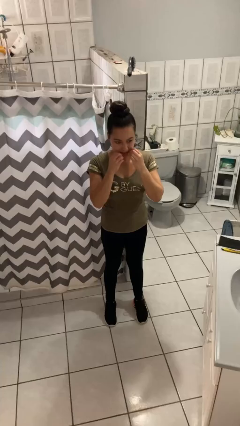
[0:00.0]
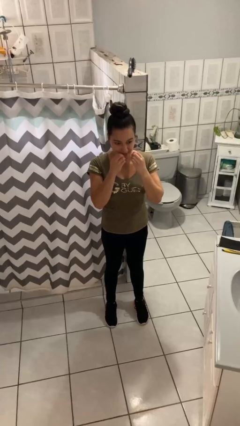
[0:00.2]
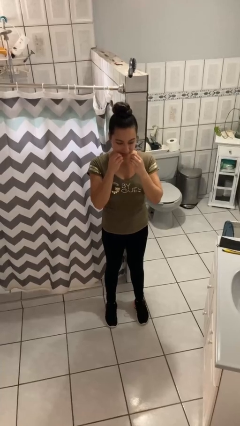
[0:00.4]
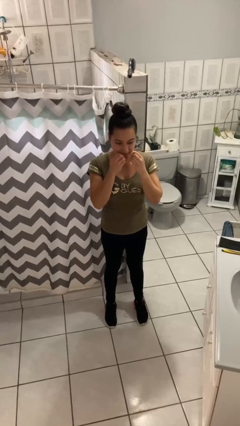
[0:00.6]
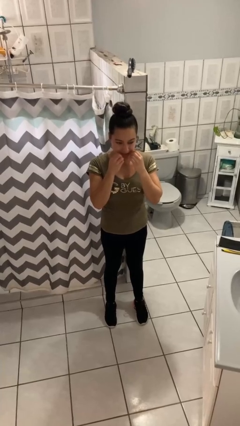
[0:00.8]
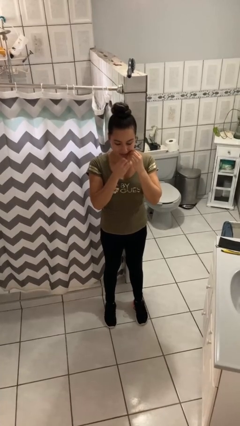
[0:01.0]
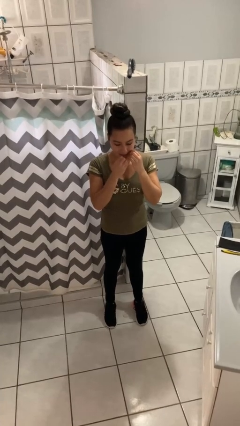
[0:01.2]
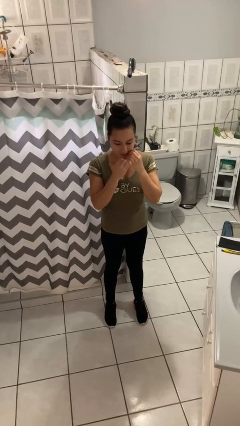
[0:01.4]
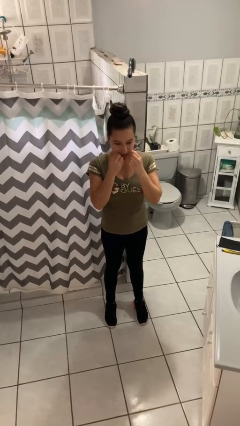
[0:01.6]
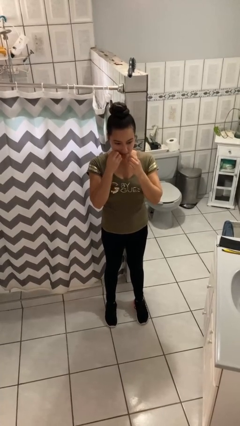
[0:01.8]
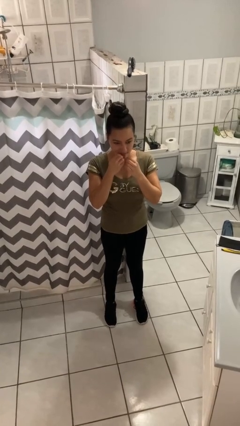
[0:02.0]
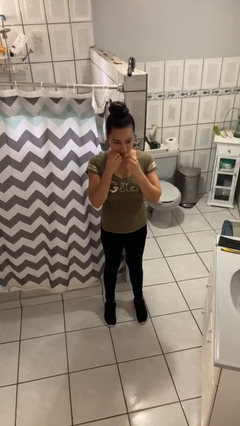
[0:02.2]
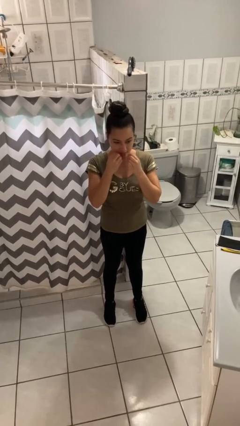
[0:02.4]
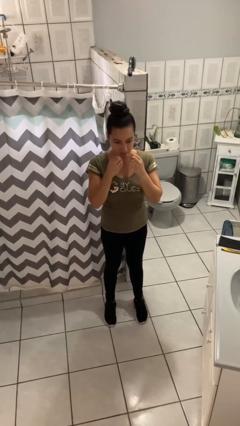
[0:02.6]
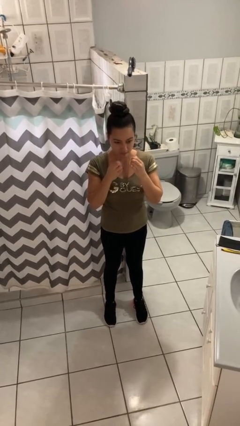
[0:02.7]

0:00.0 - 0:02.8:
person flosses

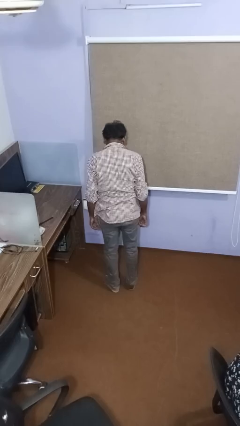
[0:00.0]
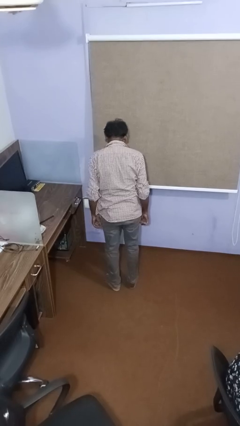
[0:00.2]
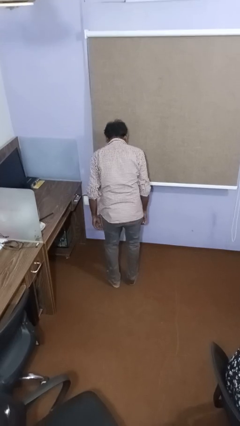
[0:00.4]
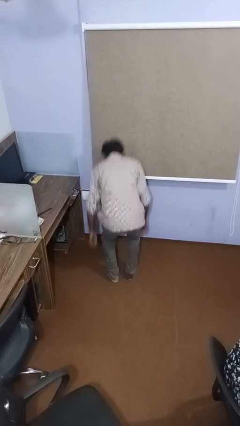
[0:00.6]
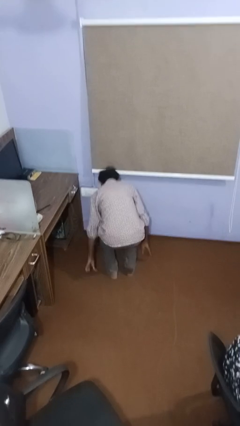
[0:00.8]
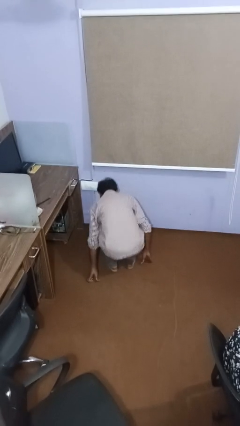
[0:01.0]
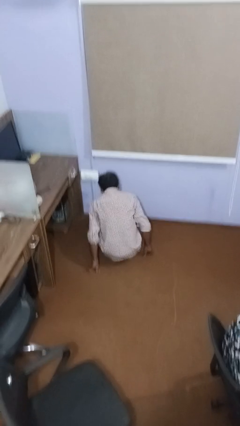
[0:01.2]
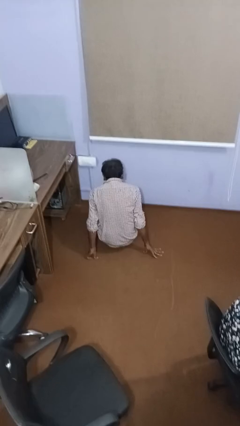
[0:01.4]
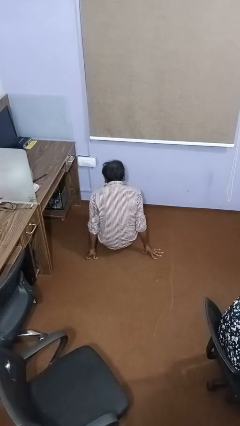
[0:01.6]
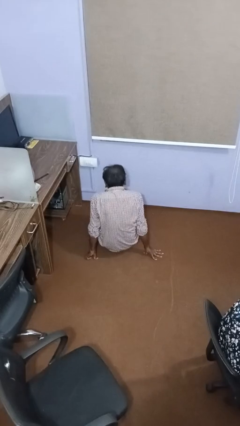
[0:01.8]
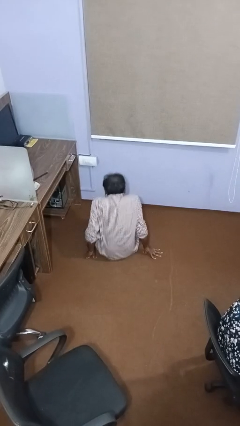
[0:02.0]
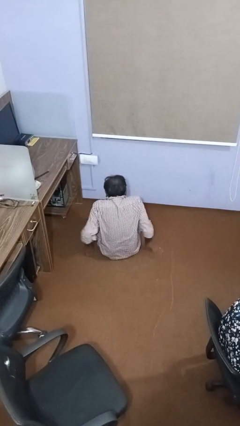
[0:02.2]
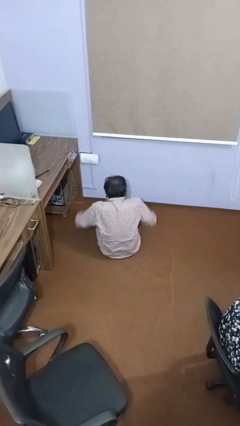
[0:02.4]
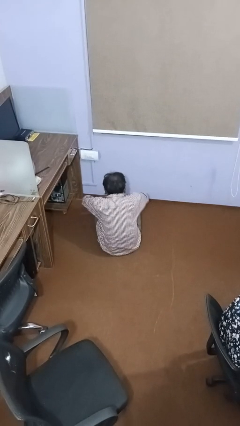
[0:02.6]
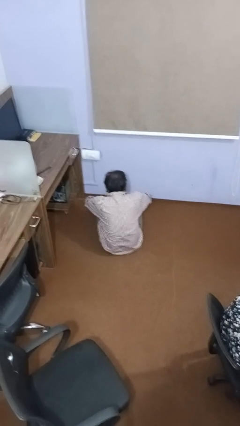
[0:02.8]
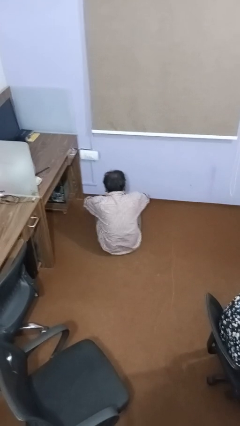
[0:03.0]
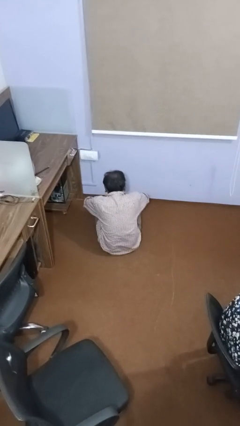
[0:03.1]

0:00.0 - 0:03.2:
person crosses legs

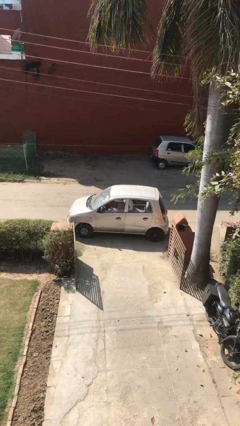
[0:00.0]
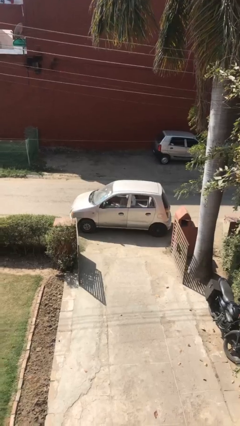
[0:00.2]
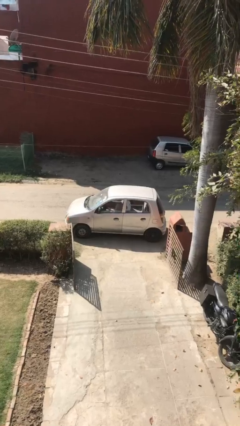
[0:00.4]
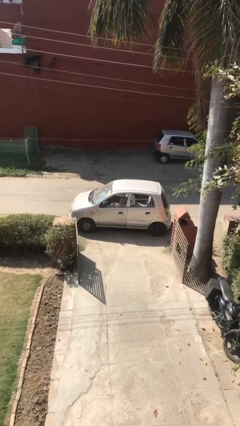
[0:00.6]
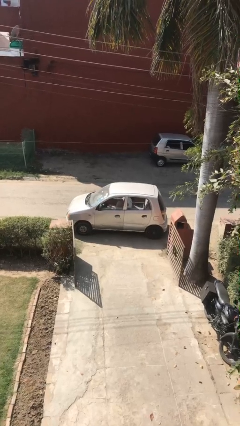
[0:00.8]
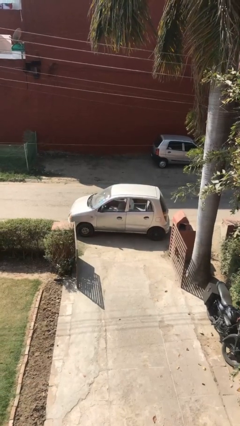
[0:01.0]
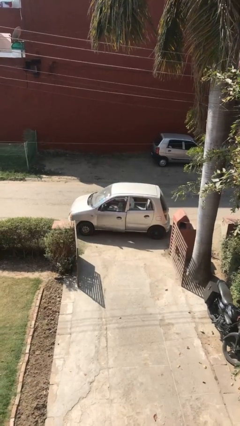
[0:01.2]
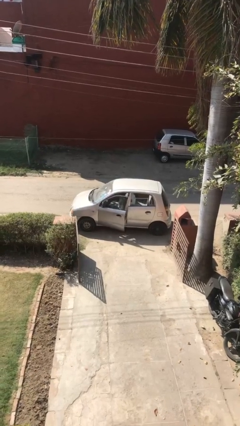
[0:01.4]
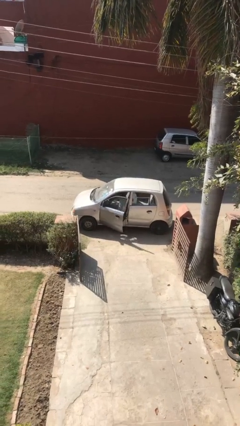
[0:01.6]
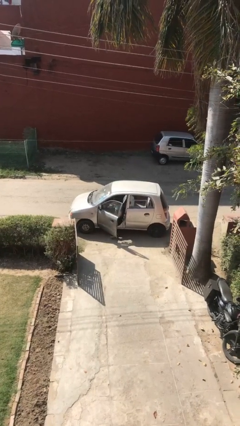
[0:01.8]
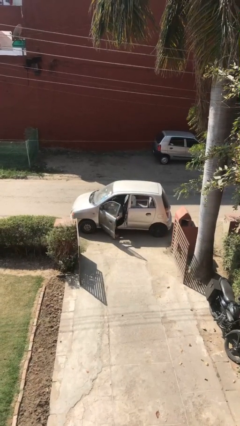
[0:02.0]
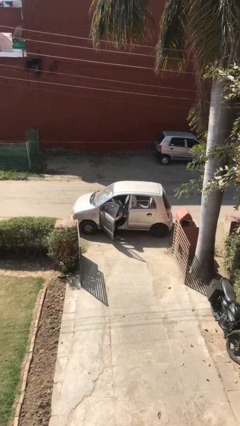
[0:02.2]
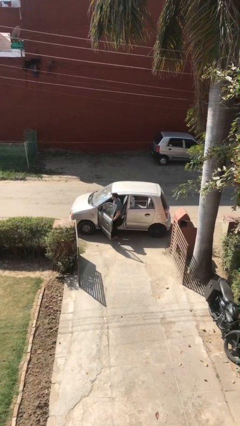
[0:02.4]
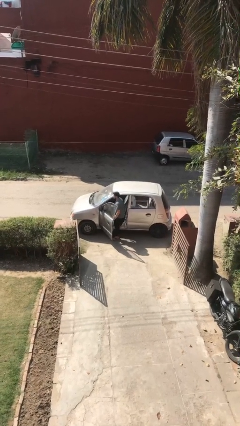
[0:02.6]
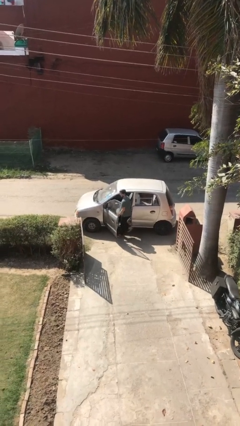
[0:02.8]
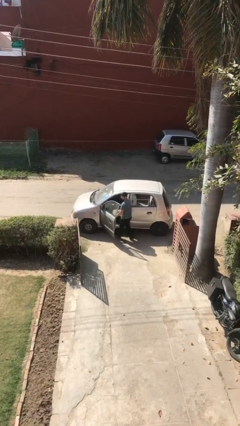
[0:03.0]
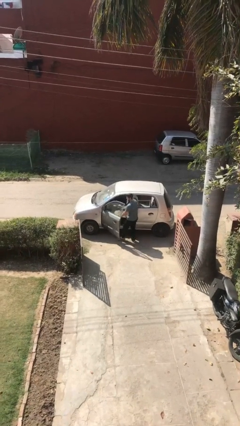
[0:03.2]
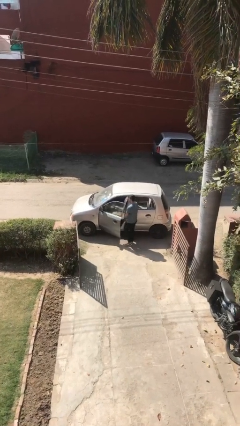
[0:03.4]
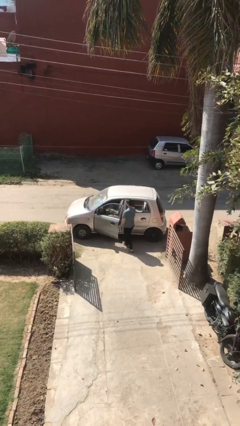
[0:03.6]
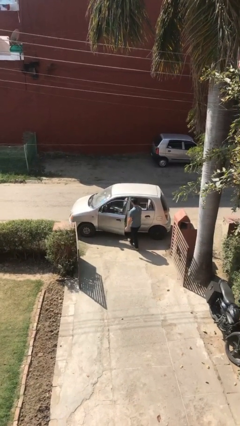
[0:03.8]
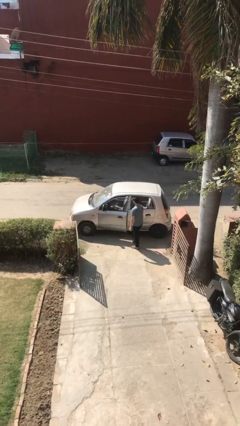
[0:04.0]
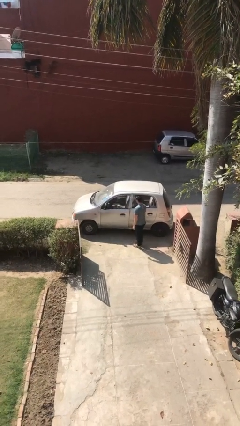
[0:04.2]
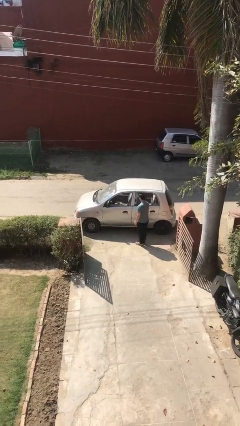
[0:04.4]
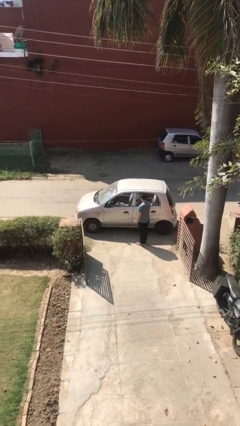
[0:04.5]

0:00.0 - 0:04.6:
car drops off person

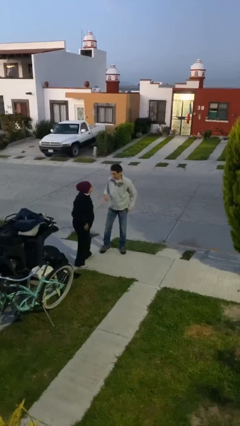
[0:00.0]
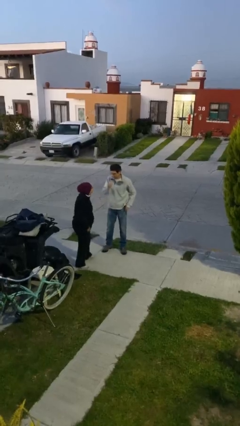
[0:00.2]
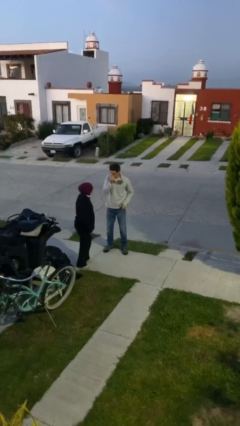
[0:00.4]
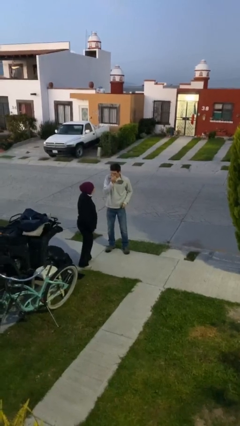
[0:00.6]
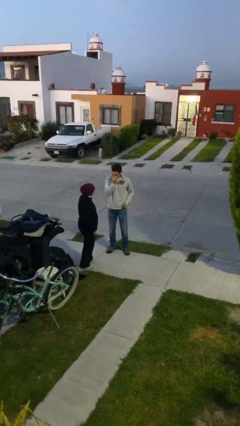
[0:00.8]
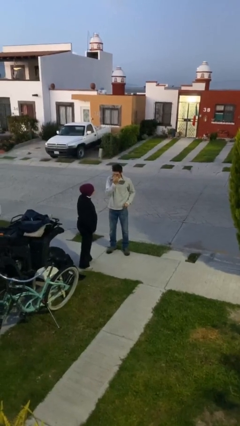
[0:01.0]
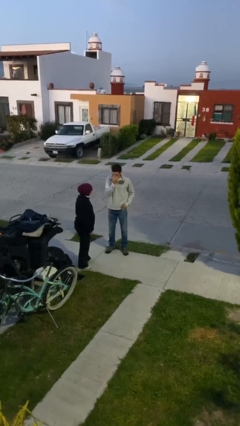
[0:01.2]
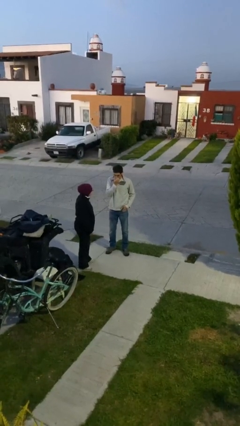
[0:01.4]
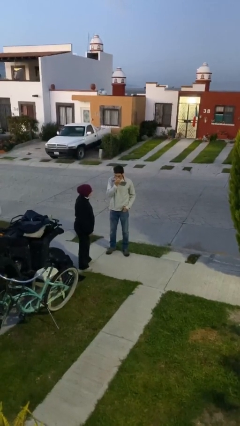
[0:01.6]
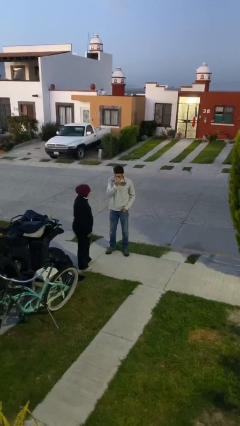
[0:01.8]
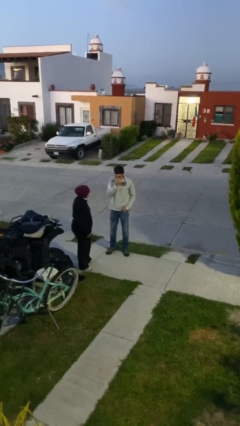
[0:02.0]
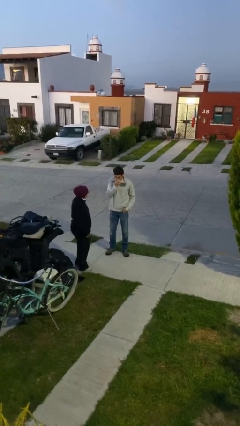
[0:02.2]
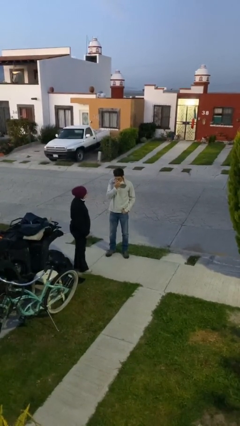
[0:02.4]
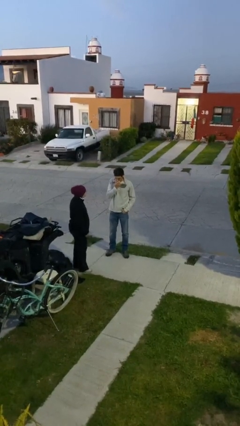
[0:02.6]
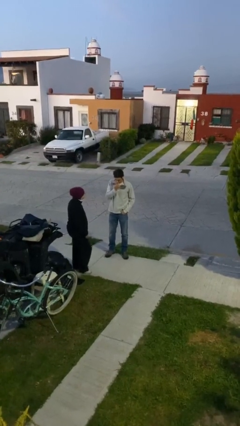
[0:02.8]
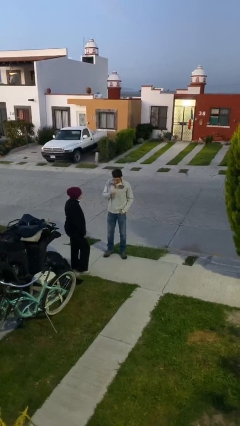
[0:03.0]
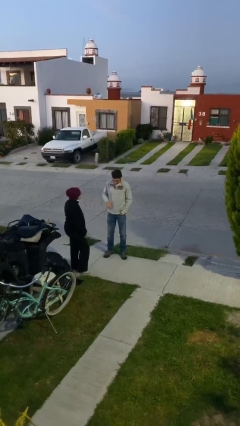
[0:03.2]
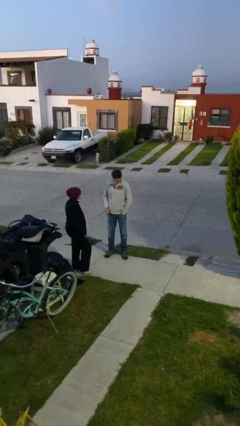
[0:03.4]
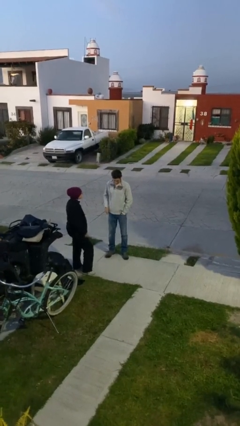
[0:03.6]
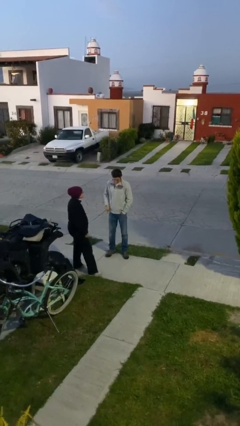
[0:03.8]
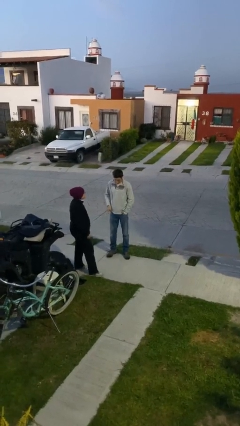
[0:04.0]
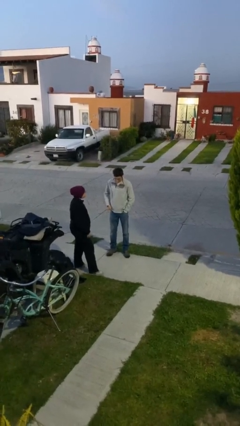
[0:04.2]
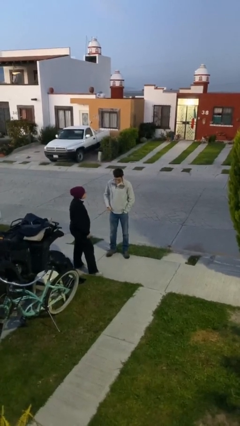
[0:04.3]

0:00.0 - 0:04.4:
person talks to person

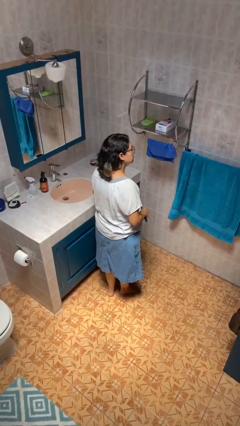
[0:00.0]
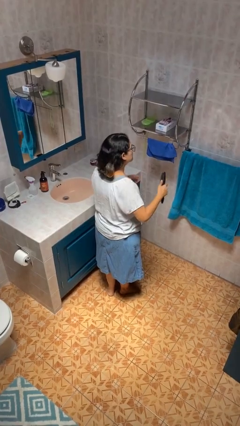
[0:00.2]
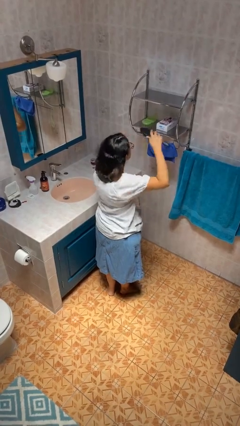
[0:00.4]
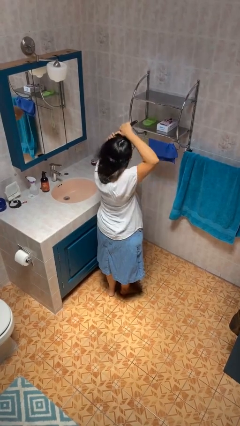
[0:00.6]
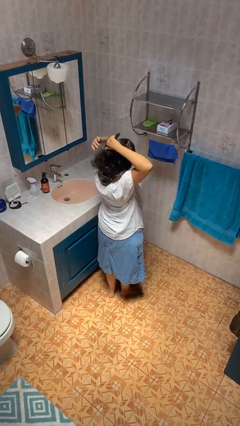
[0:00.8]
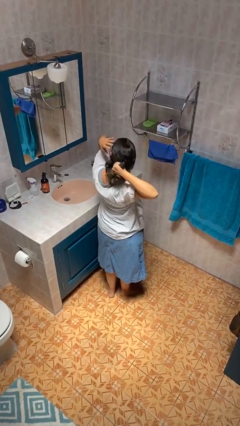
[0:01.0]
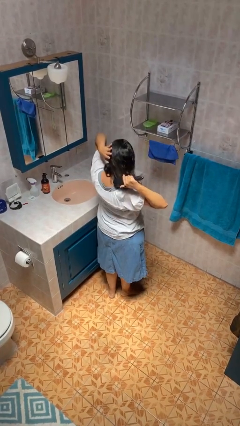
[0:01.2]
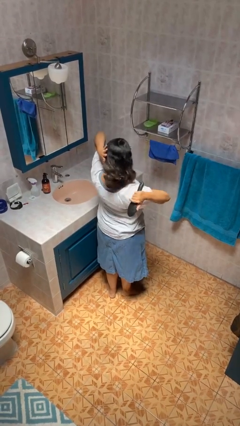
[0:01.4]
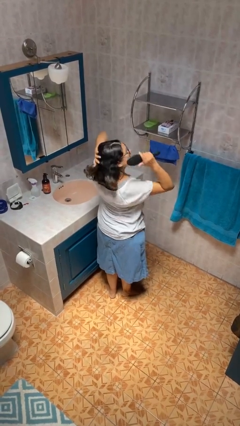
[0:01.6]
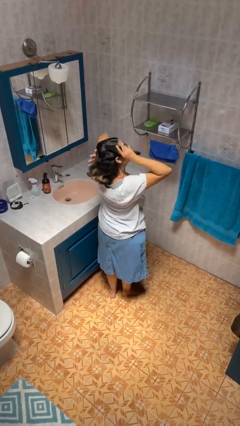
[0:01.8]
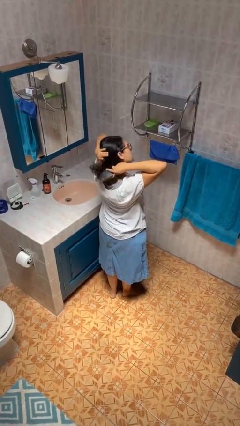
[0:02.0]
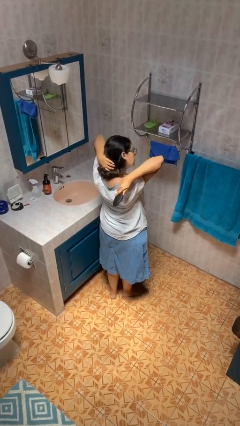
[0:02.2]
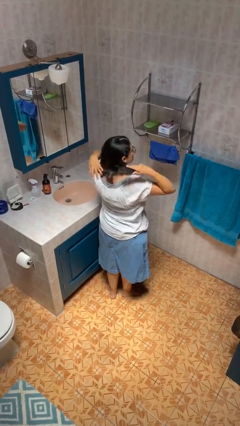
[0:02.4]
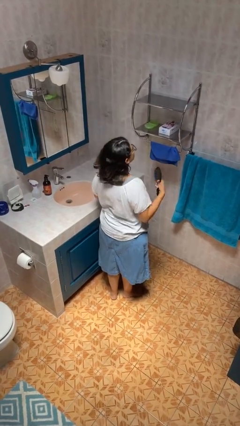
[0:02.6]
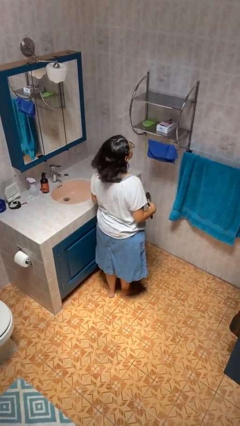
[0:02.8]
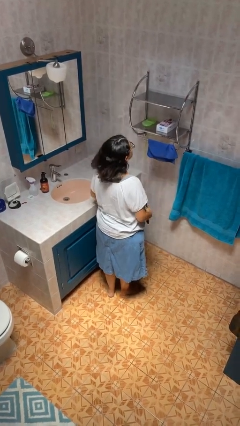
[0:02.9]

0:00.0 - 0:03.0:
person brushes hair
